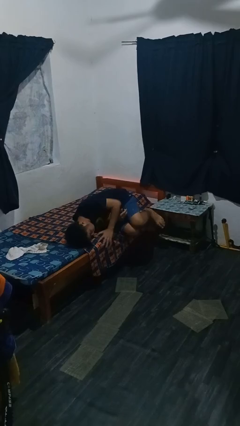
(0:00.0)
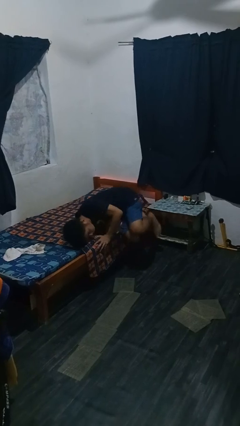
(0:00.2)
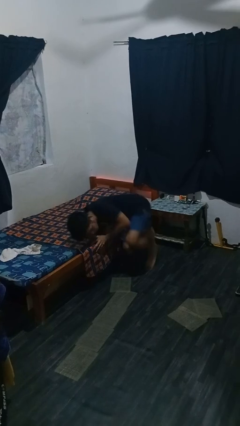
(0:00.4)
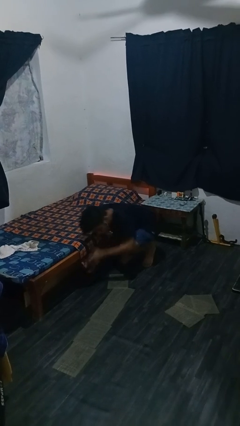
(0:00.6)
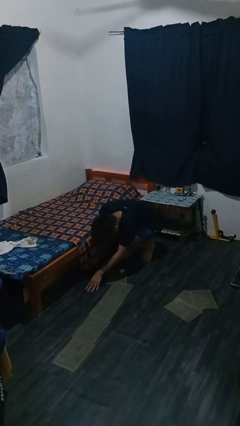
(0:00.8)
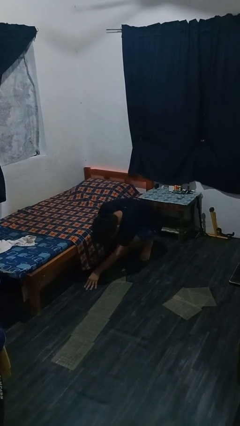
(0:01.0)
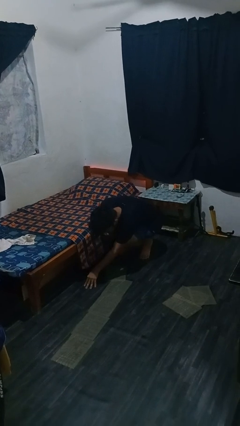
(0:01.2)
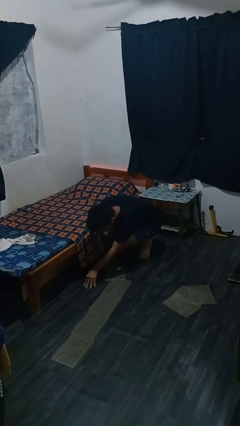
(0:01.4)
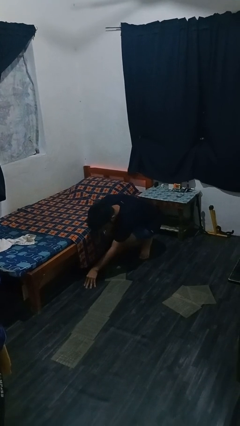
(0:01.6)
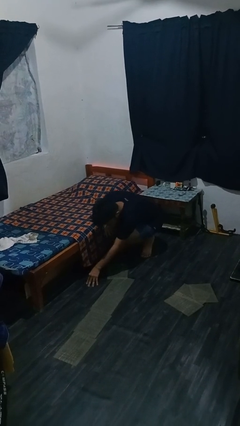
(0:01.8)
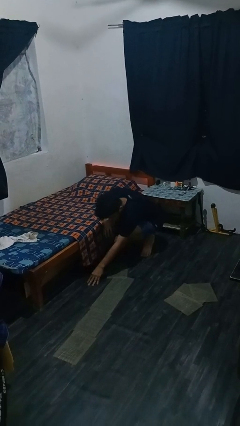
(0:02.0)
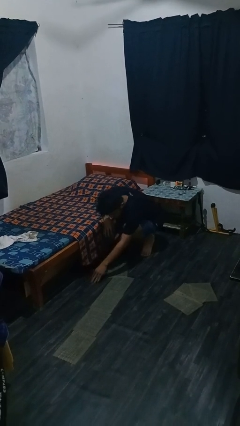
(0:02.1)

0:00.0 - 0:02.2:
person falls from bed

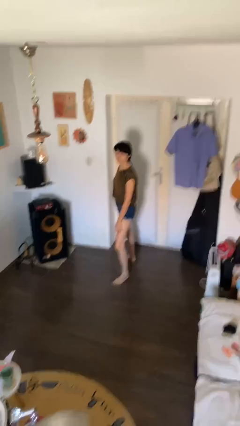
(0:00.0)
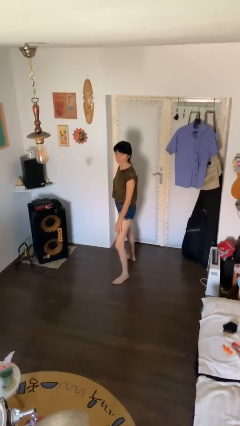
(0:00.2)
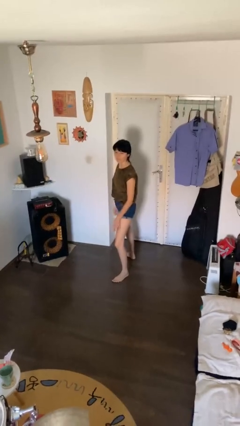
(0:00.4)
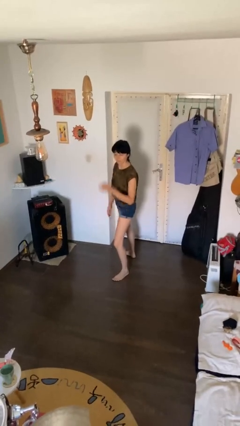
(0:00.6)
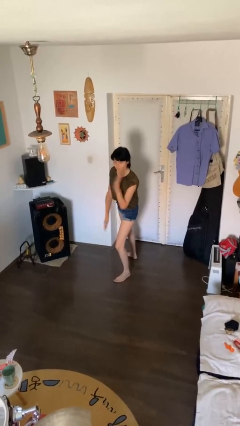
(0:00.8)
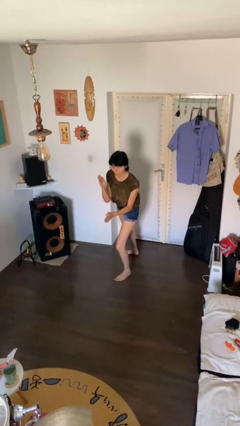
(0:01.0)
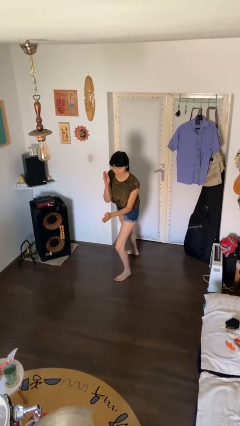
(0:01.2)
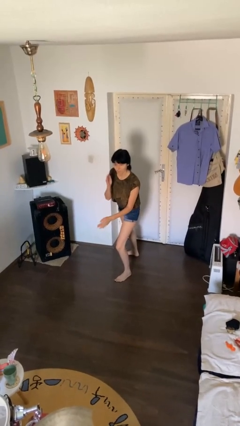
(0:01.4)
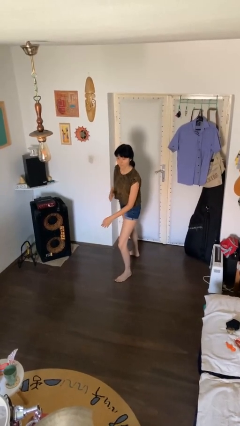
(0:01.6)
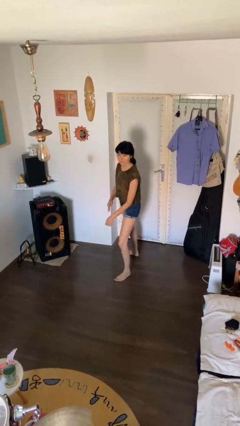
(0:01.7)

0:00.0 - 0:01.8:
person karate chop

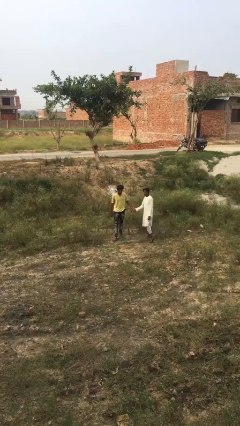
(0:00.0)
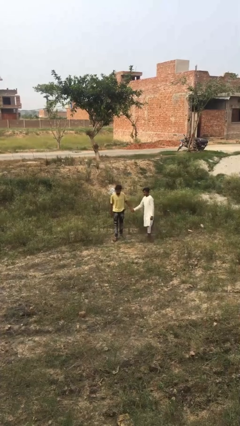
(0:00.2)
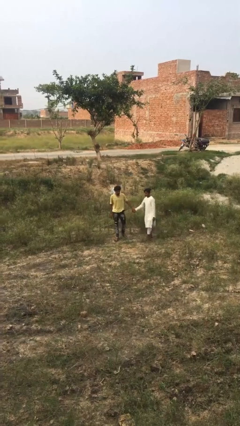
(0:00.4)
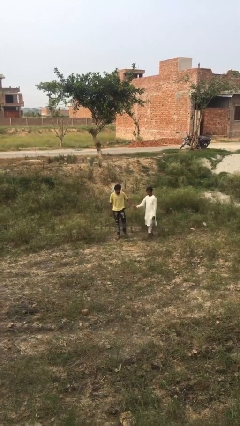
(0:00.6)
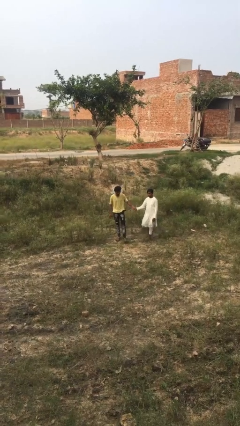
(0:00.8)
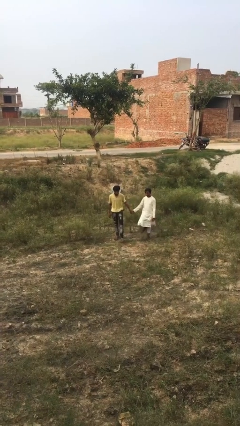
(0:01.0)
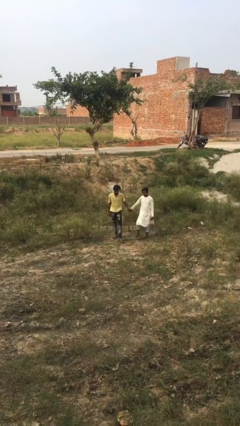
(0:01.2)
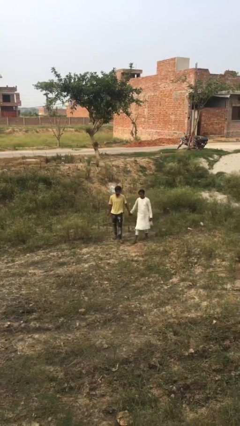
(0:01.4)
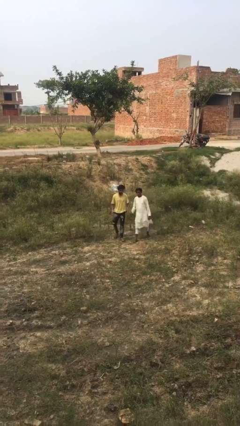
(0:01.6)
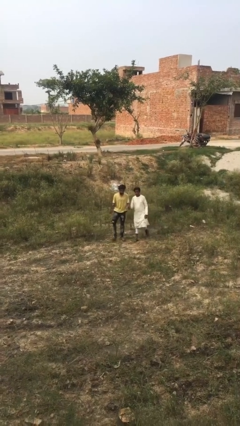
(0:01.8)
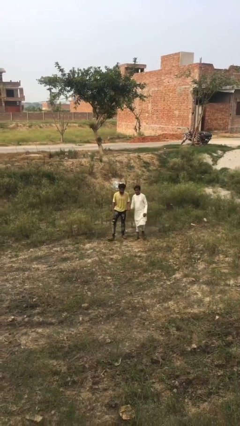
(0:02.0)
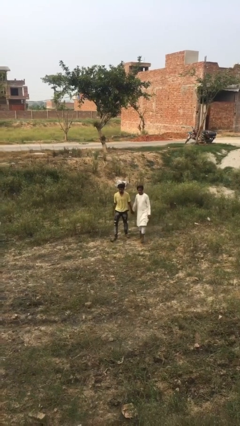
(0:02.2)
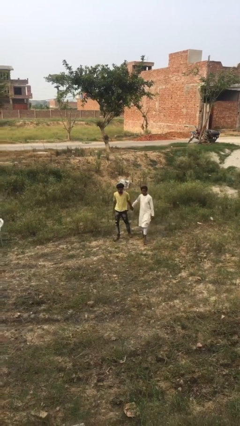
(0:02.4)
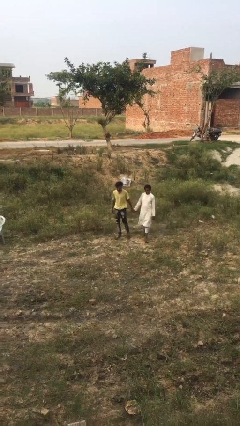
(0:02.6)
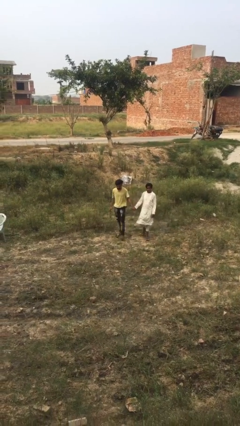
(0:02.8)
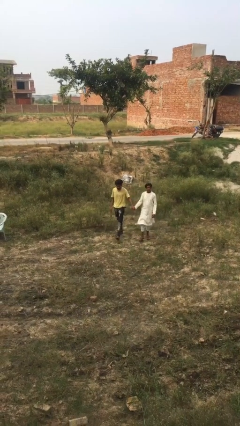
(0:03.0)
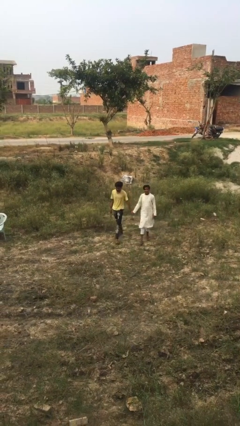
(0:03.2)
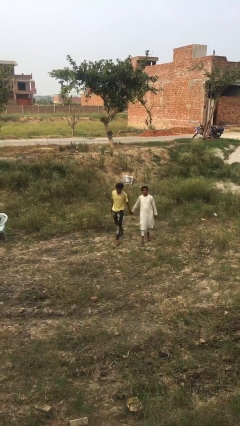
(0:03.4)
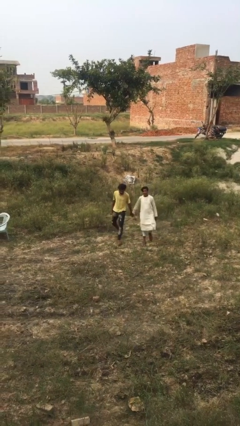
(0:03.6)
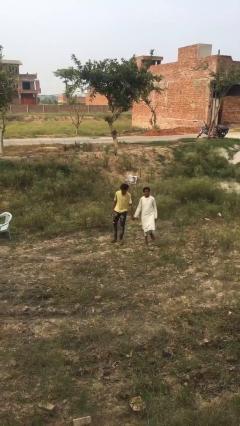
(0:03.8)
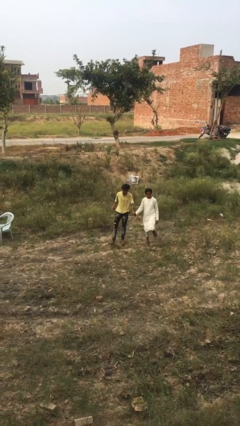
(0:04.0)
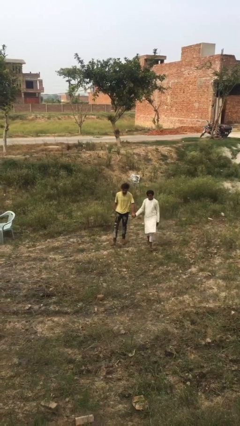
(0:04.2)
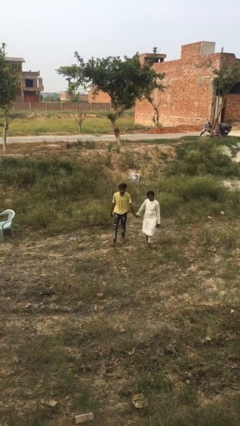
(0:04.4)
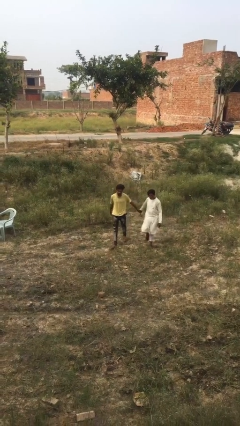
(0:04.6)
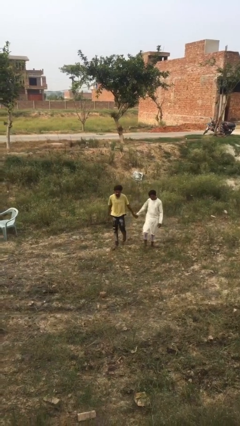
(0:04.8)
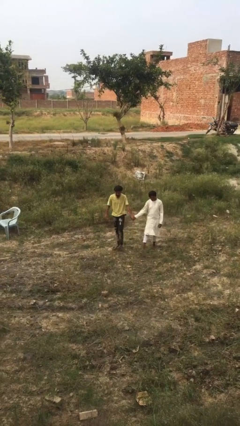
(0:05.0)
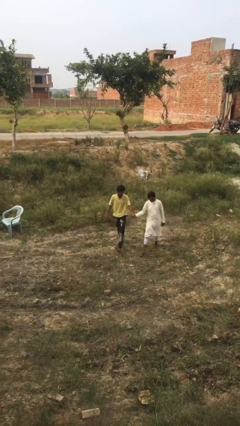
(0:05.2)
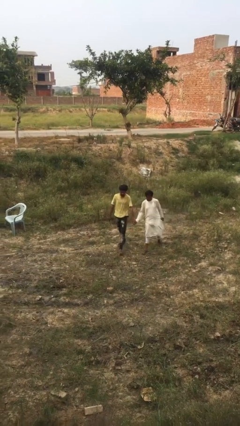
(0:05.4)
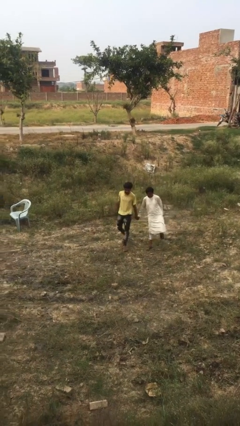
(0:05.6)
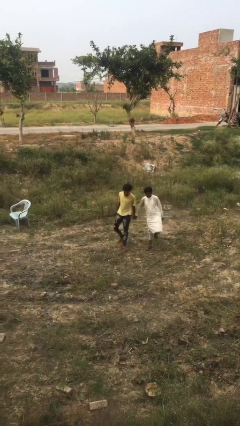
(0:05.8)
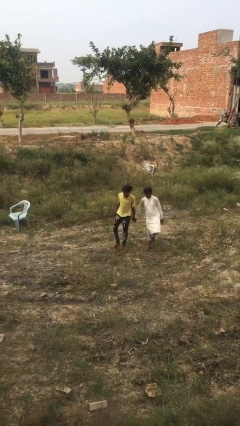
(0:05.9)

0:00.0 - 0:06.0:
person holds hand

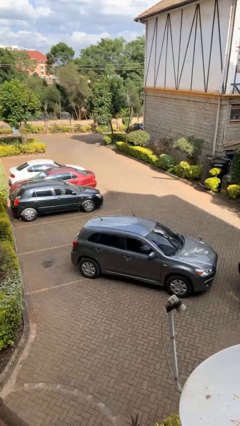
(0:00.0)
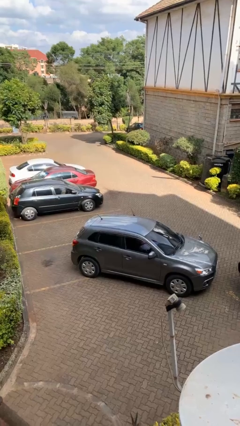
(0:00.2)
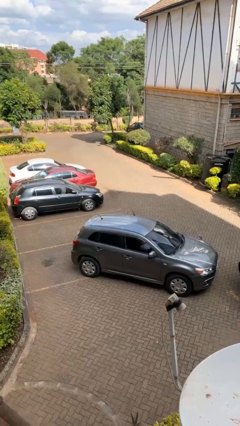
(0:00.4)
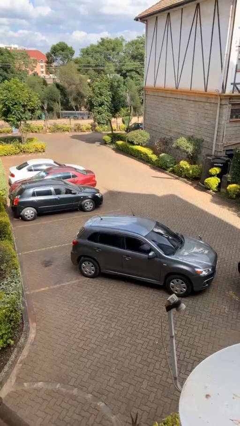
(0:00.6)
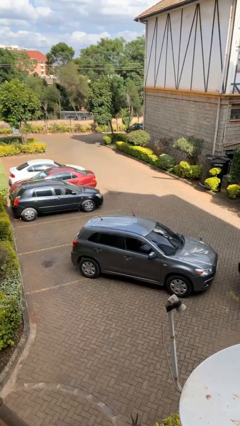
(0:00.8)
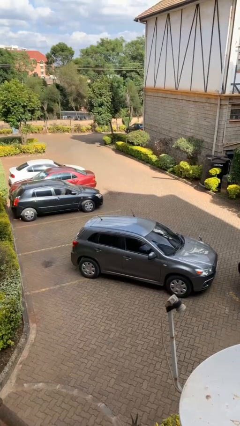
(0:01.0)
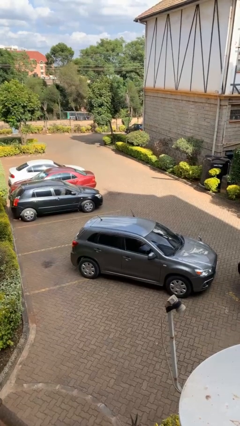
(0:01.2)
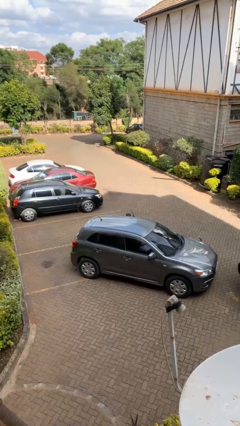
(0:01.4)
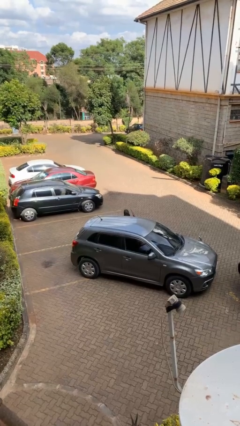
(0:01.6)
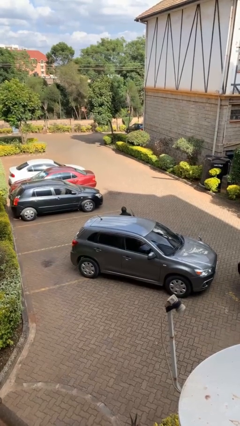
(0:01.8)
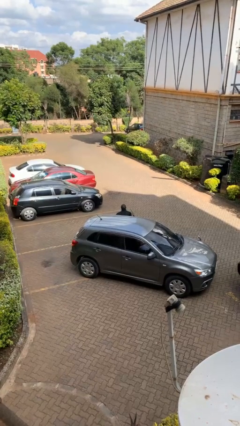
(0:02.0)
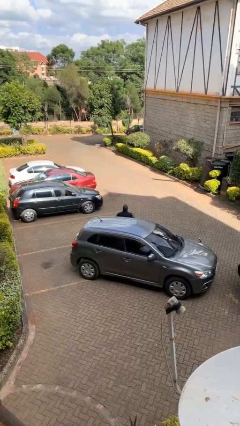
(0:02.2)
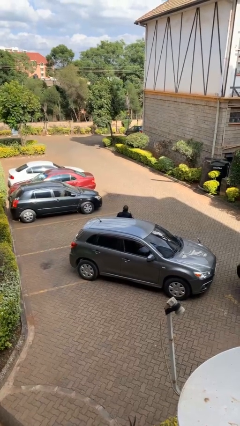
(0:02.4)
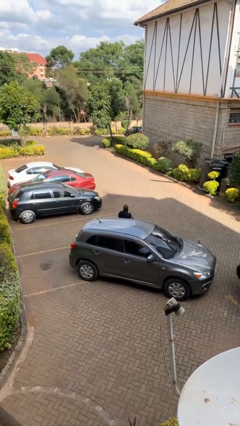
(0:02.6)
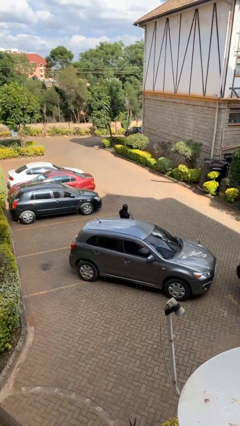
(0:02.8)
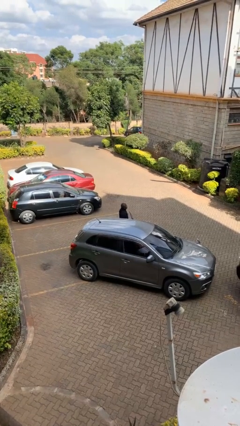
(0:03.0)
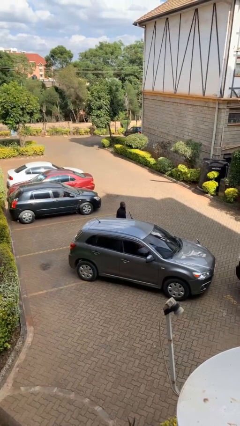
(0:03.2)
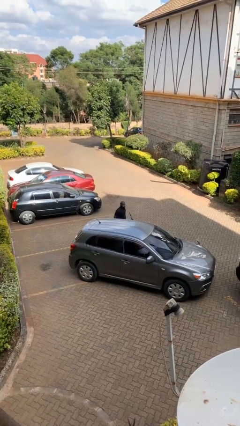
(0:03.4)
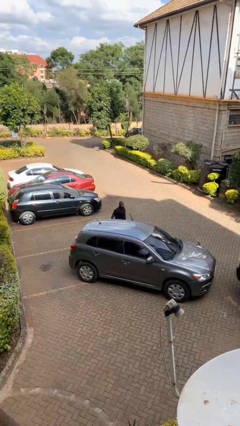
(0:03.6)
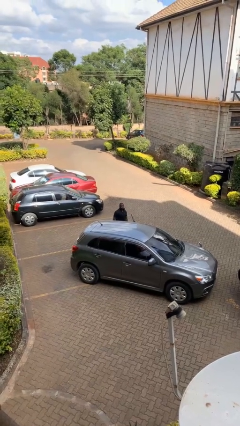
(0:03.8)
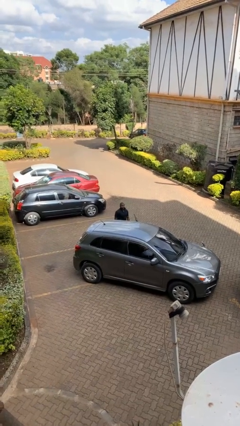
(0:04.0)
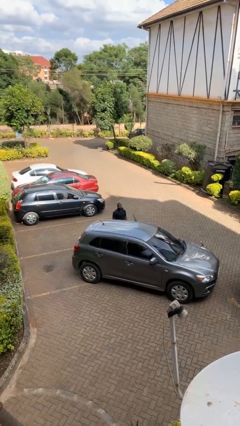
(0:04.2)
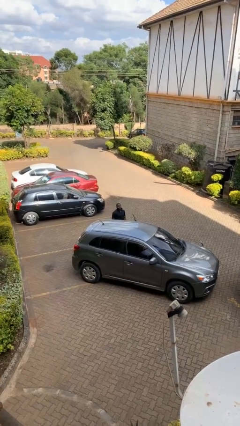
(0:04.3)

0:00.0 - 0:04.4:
person exits car

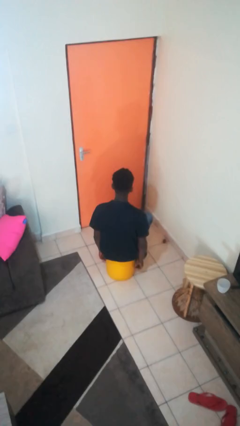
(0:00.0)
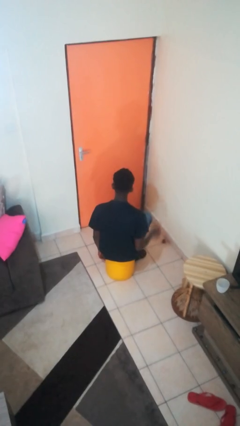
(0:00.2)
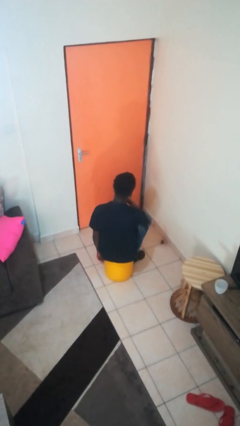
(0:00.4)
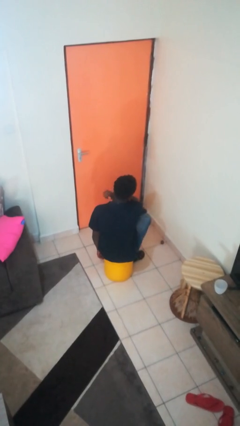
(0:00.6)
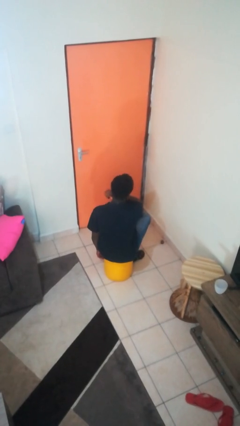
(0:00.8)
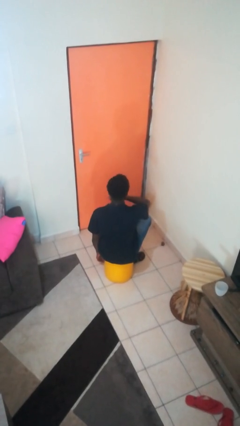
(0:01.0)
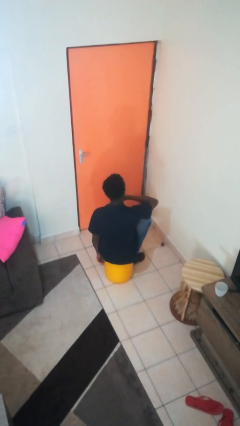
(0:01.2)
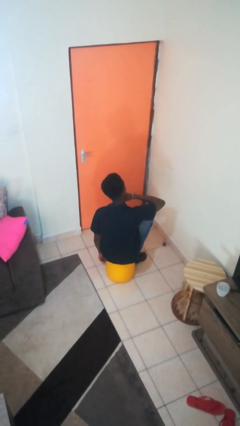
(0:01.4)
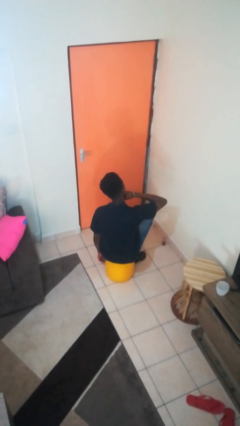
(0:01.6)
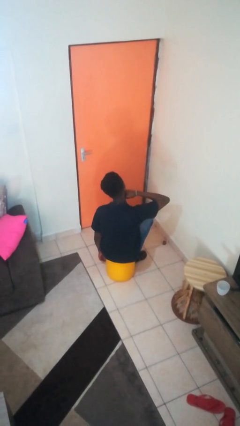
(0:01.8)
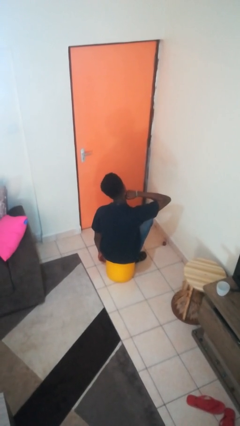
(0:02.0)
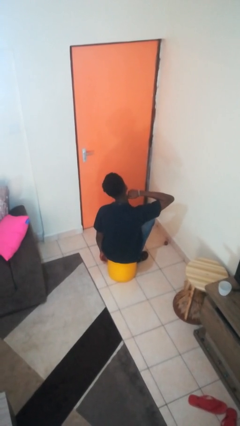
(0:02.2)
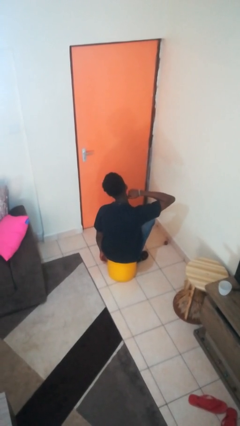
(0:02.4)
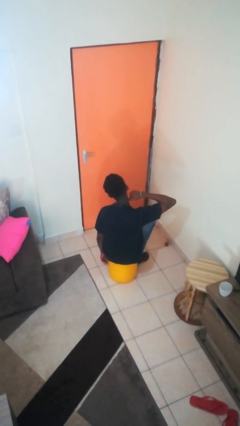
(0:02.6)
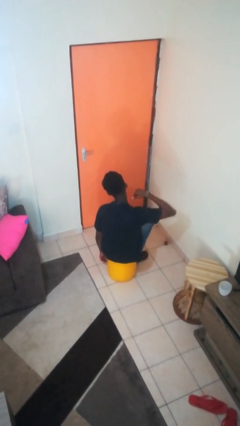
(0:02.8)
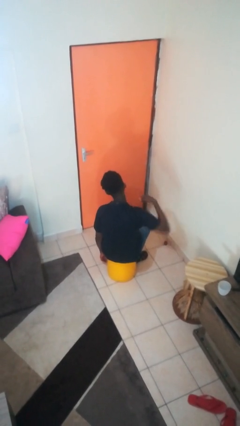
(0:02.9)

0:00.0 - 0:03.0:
person gestures cut

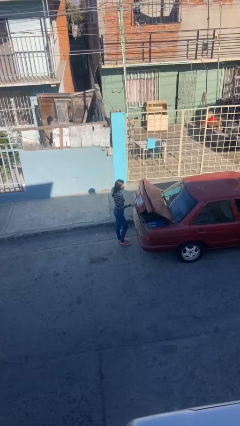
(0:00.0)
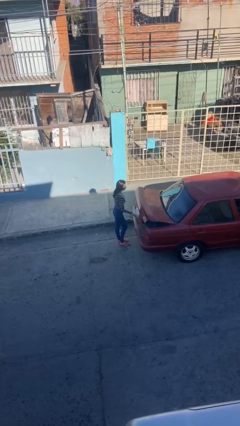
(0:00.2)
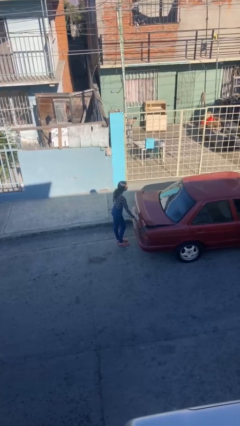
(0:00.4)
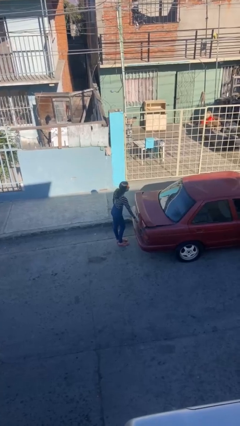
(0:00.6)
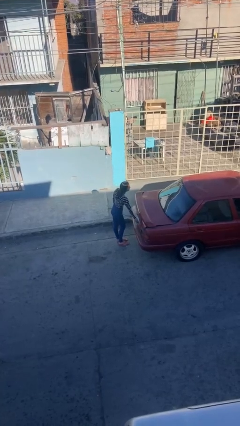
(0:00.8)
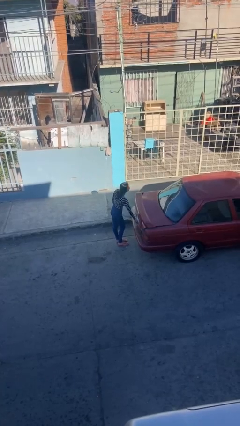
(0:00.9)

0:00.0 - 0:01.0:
person closes car trunk
